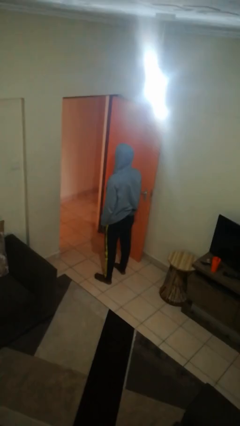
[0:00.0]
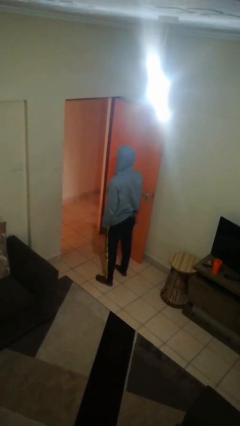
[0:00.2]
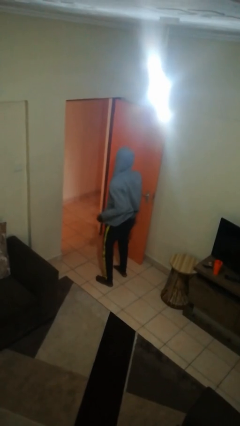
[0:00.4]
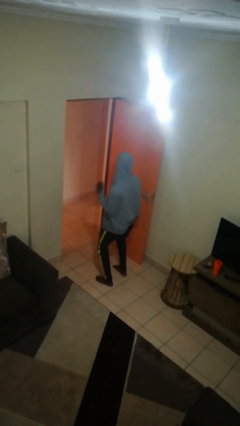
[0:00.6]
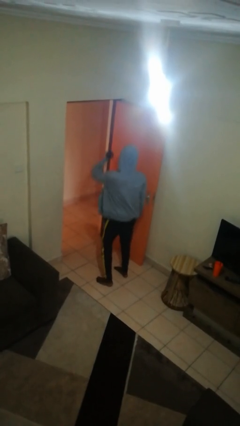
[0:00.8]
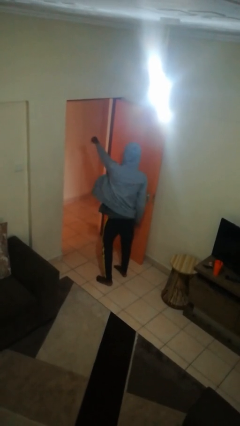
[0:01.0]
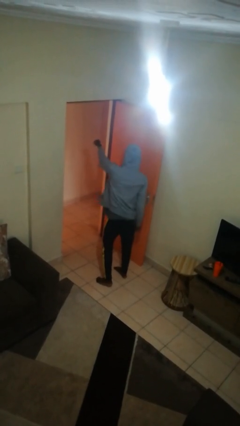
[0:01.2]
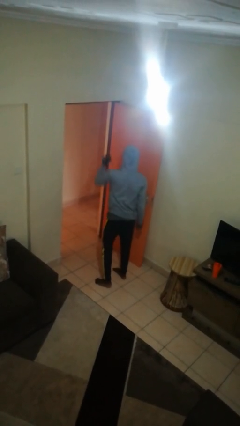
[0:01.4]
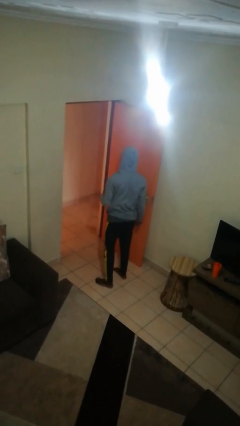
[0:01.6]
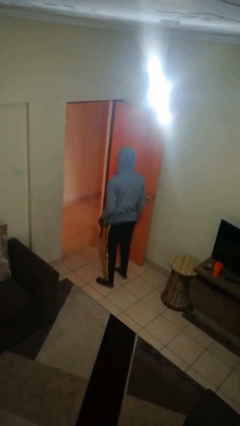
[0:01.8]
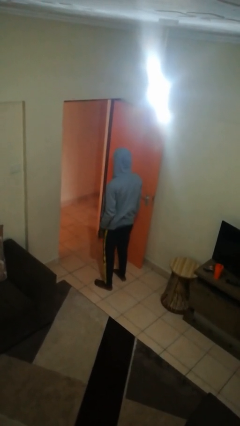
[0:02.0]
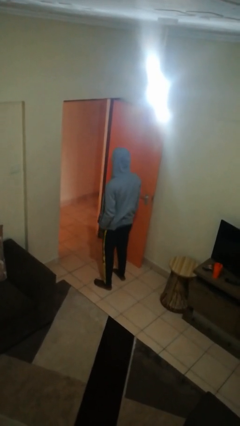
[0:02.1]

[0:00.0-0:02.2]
person punches

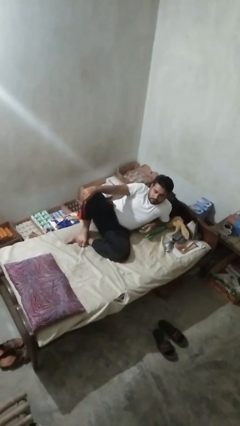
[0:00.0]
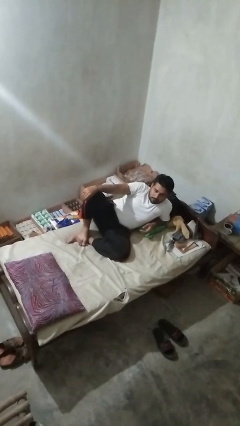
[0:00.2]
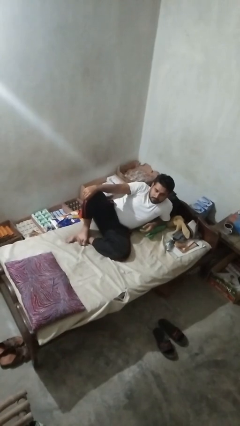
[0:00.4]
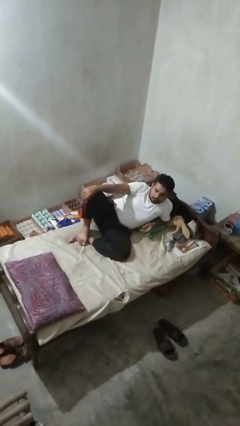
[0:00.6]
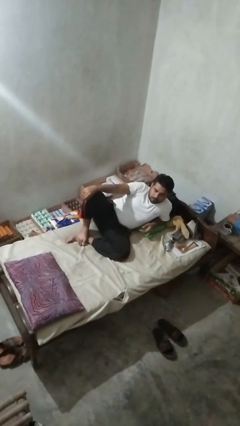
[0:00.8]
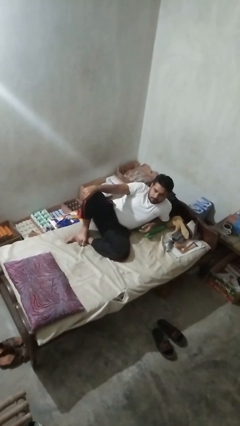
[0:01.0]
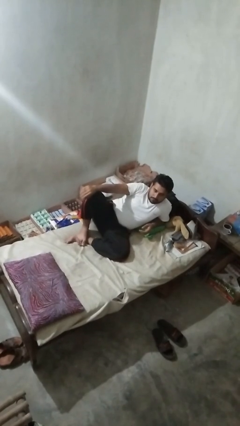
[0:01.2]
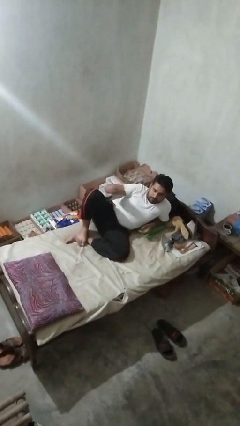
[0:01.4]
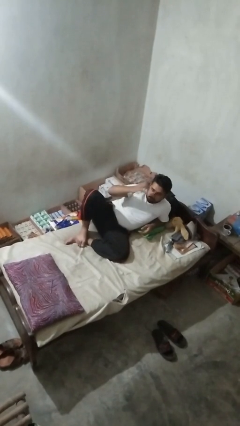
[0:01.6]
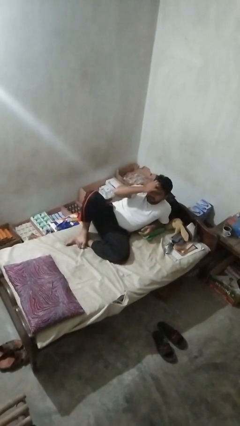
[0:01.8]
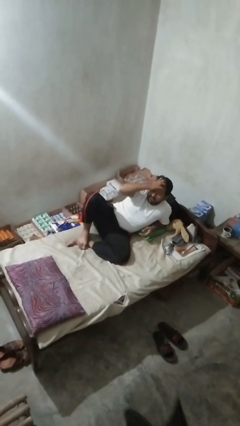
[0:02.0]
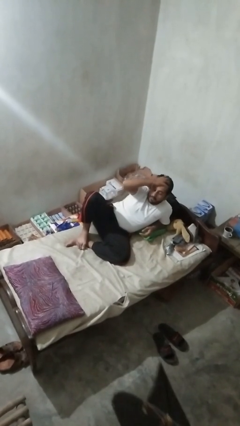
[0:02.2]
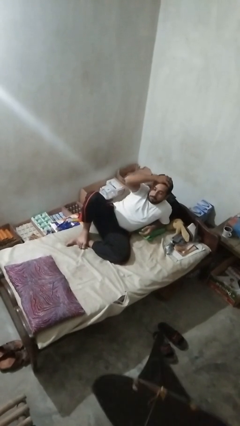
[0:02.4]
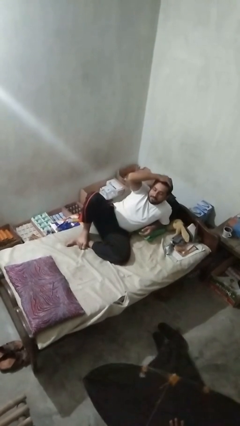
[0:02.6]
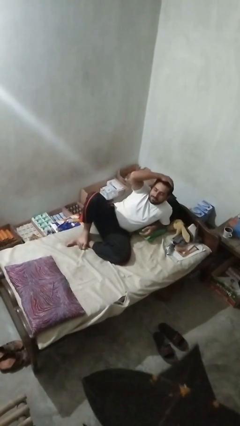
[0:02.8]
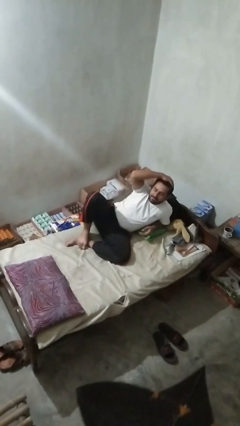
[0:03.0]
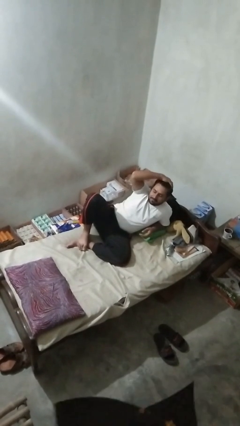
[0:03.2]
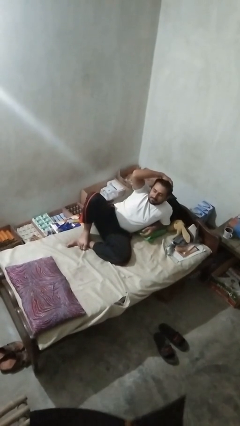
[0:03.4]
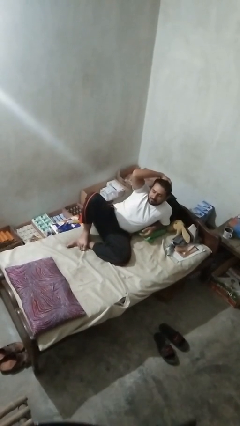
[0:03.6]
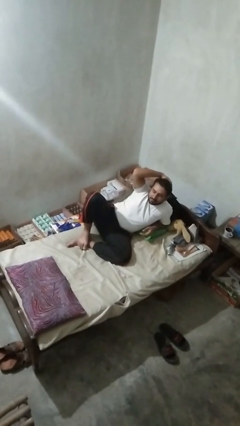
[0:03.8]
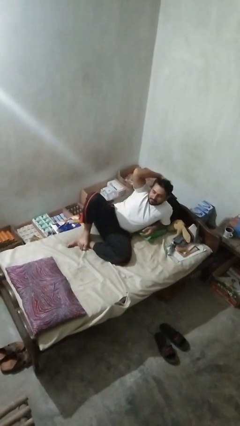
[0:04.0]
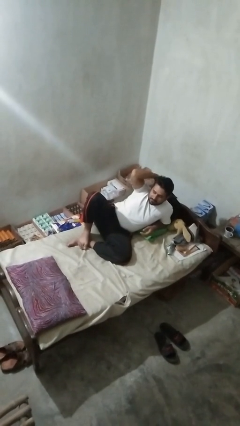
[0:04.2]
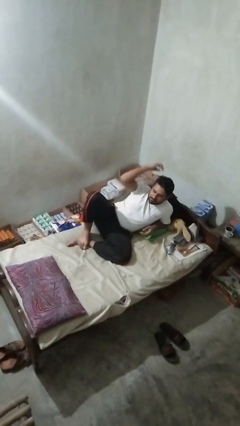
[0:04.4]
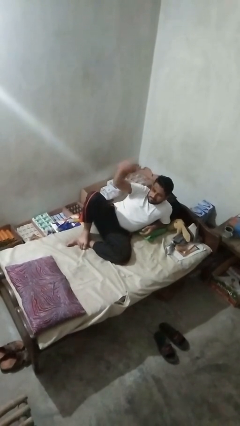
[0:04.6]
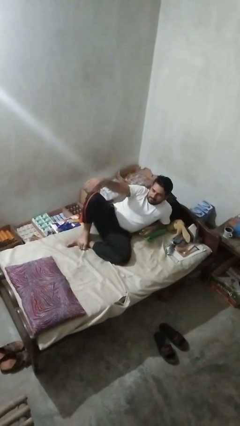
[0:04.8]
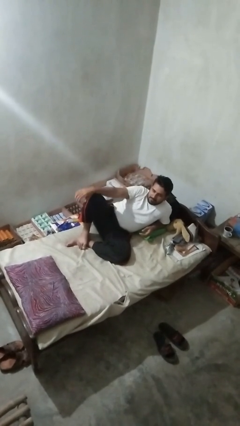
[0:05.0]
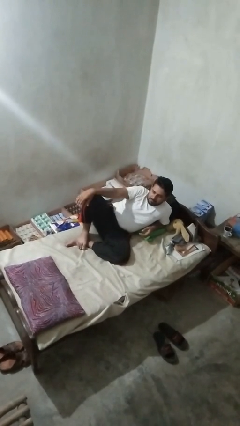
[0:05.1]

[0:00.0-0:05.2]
person strokes hair

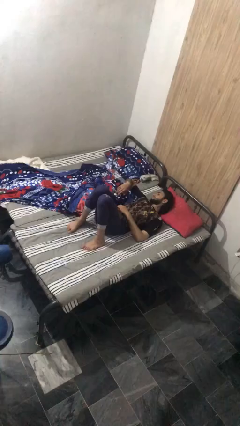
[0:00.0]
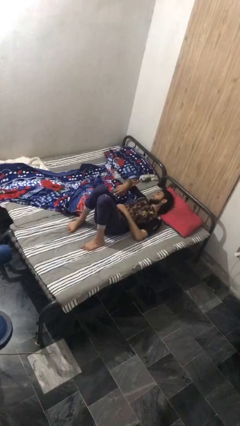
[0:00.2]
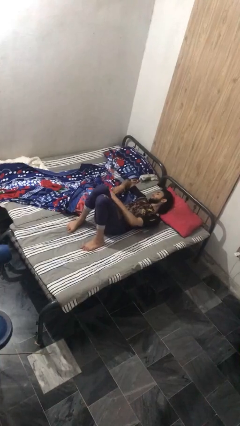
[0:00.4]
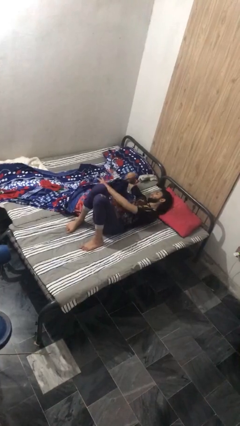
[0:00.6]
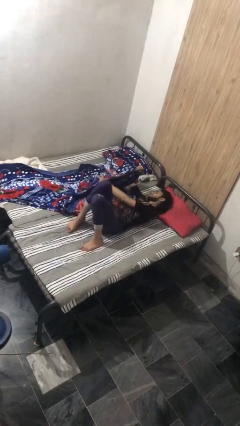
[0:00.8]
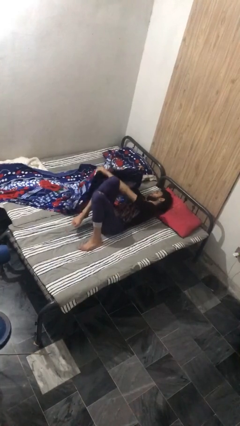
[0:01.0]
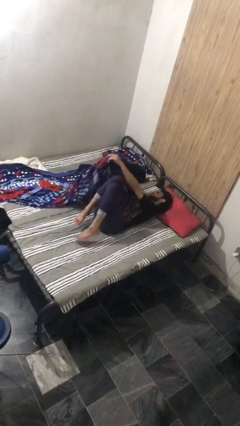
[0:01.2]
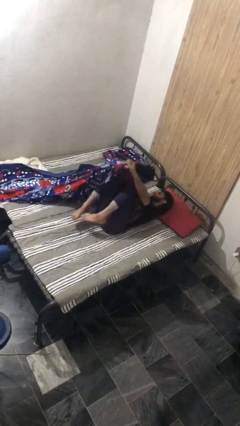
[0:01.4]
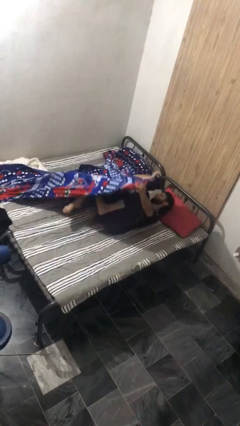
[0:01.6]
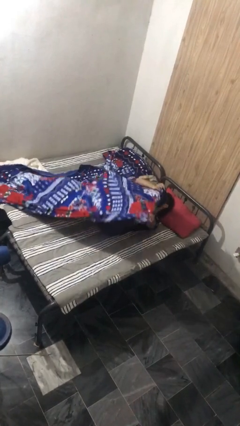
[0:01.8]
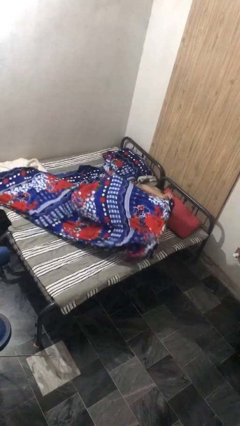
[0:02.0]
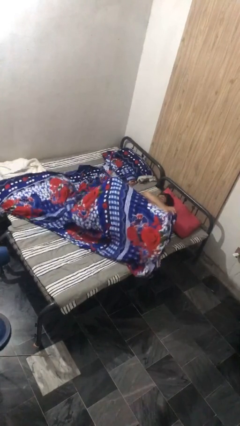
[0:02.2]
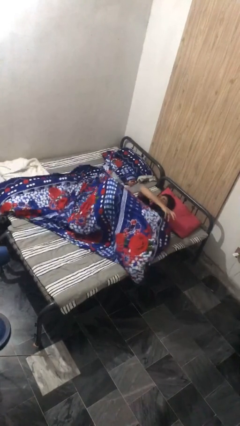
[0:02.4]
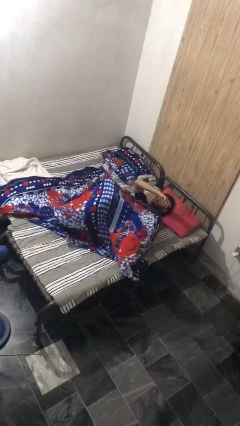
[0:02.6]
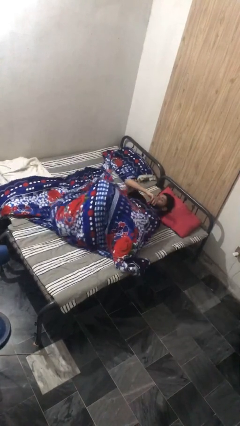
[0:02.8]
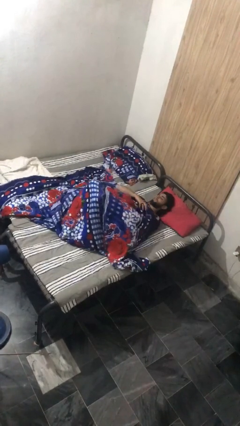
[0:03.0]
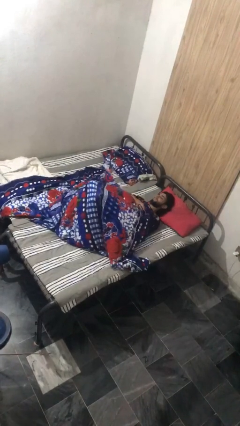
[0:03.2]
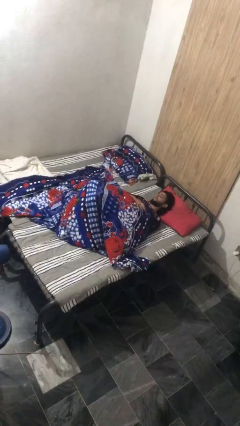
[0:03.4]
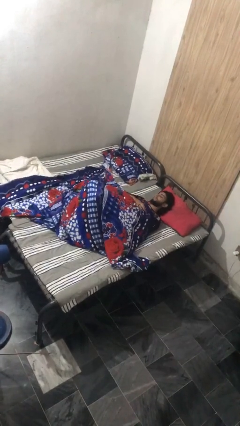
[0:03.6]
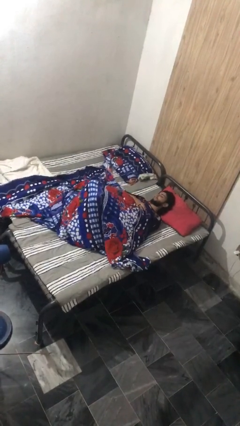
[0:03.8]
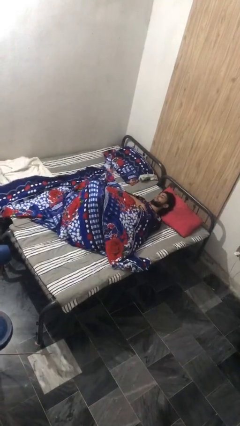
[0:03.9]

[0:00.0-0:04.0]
person covers with bedsheets

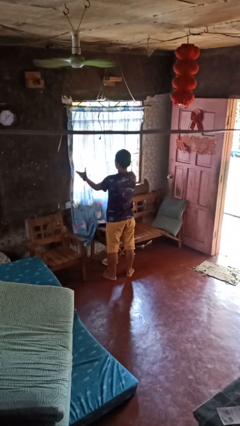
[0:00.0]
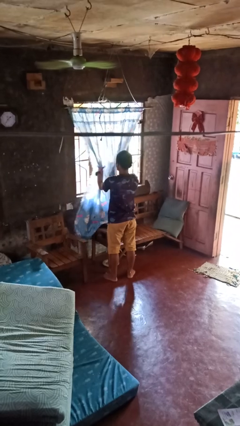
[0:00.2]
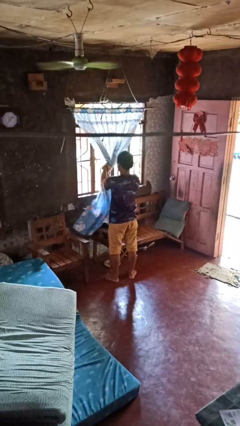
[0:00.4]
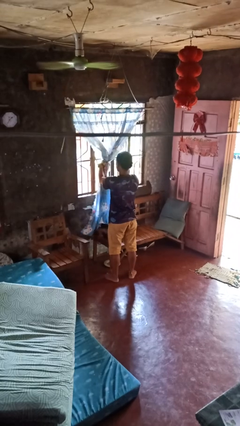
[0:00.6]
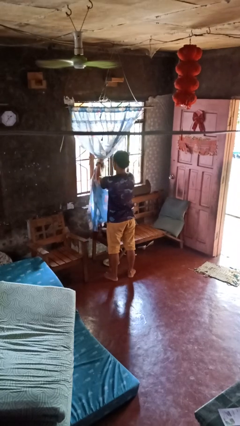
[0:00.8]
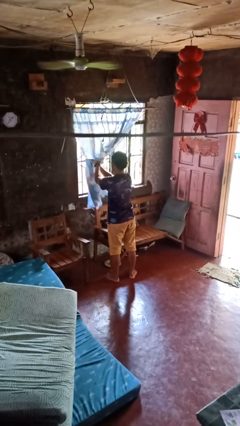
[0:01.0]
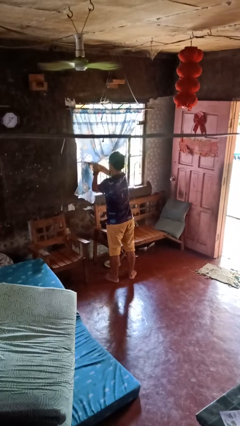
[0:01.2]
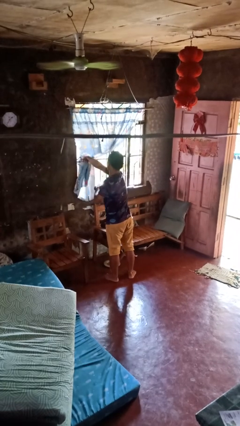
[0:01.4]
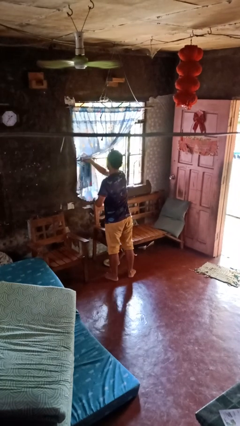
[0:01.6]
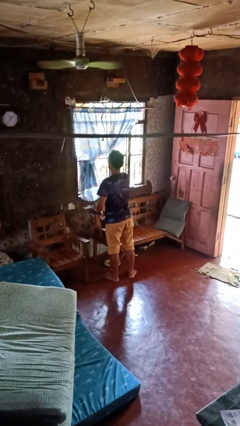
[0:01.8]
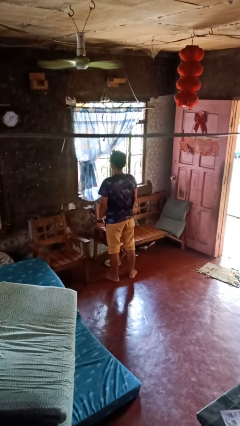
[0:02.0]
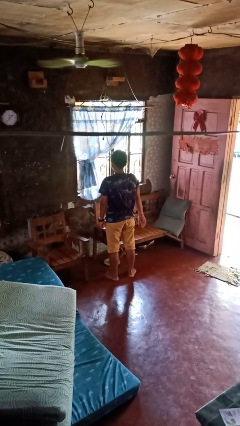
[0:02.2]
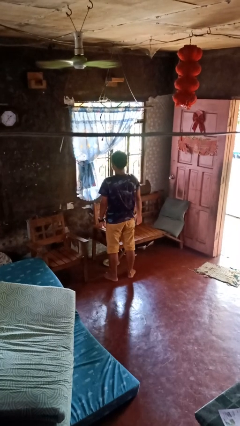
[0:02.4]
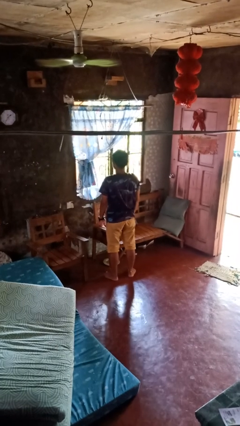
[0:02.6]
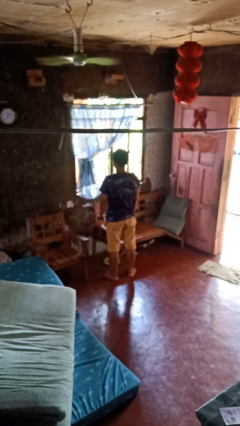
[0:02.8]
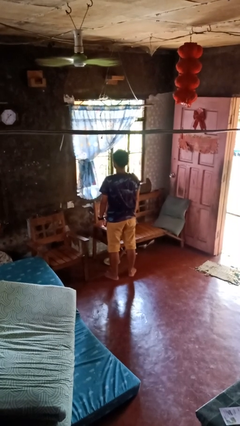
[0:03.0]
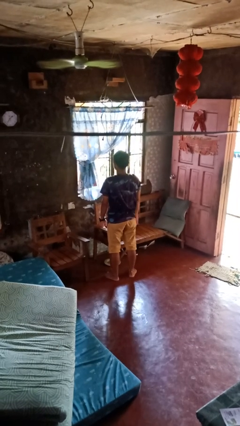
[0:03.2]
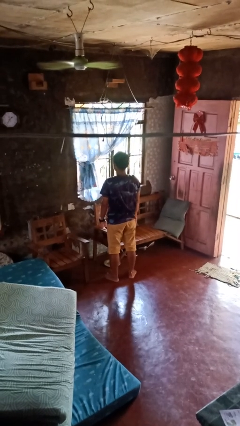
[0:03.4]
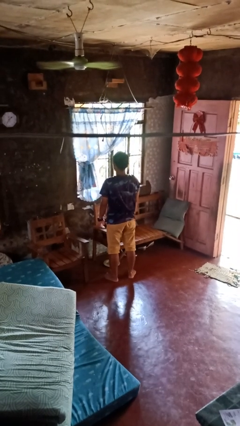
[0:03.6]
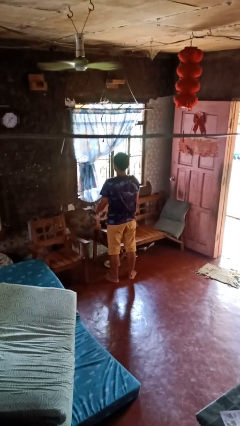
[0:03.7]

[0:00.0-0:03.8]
person opens curtains

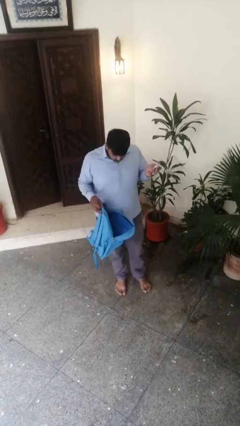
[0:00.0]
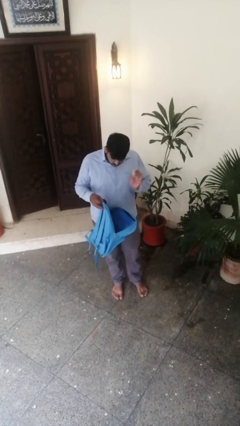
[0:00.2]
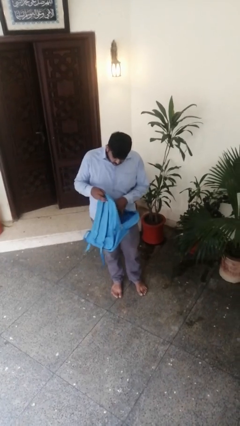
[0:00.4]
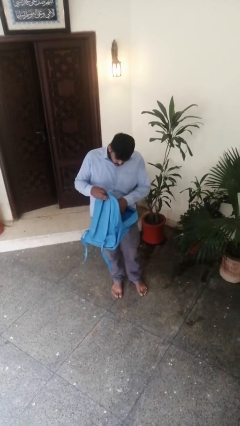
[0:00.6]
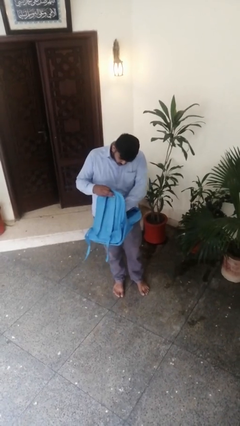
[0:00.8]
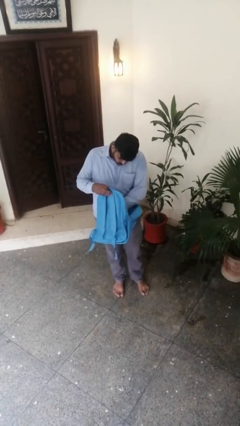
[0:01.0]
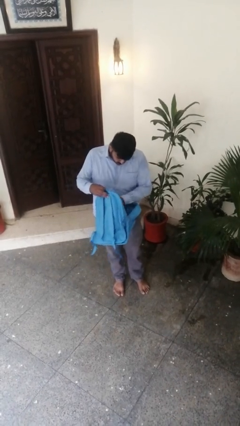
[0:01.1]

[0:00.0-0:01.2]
person puts object into backpack

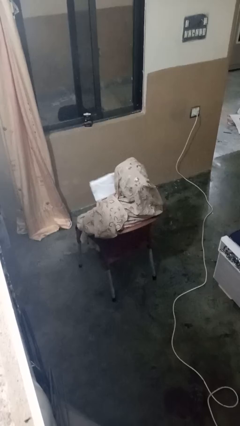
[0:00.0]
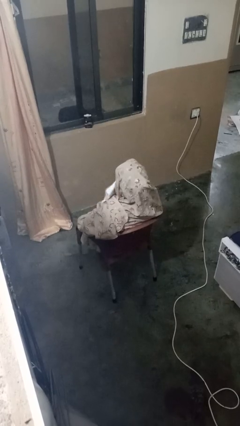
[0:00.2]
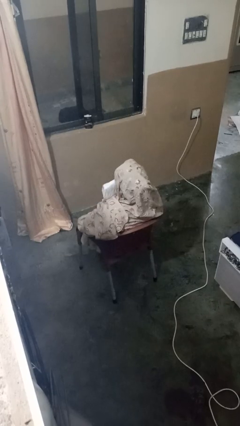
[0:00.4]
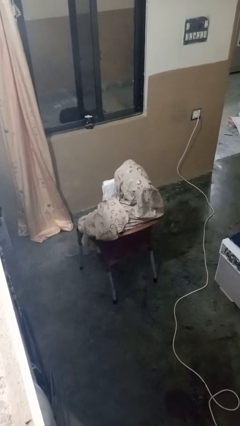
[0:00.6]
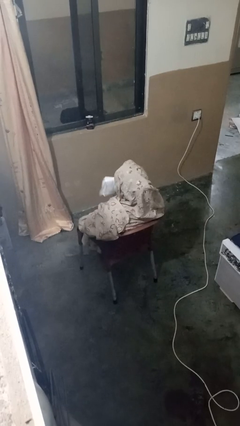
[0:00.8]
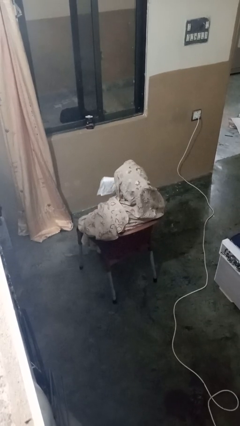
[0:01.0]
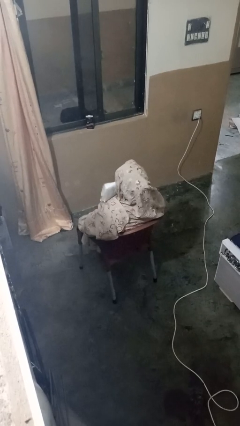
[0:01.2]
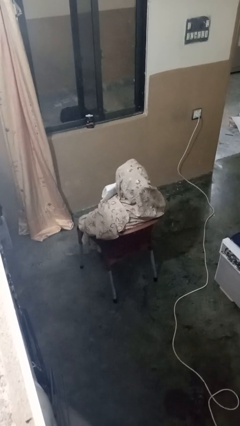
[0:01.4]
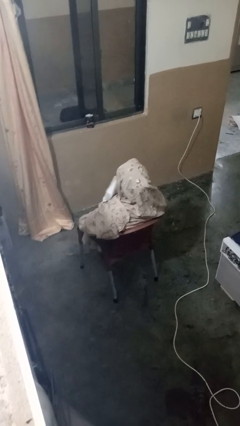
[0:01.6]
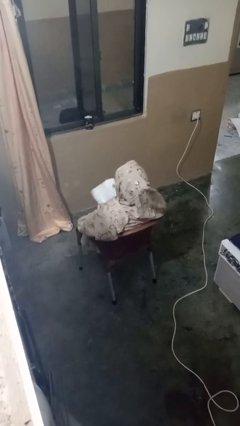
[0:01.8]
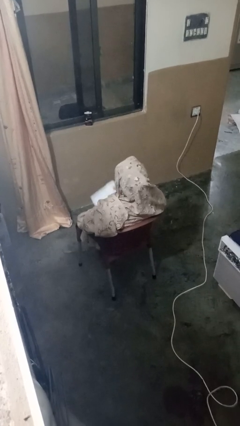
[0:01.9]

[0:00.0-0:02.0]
person wipes mouth with napkin
